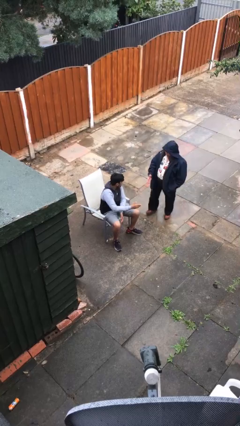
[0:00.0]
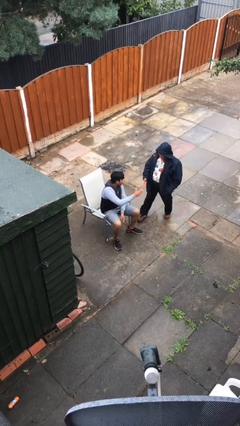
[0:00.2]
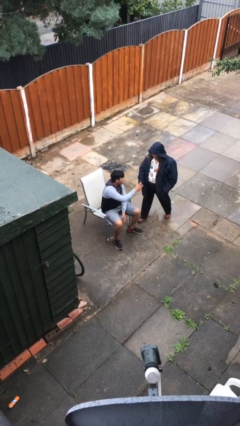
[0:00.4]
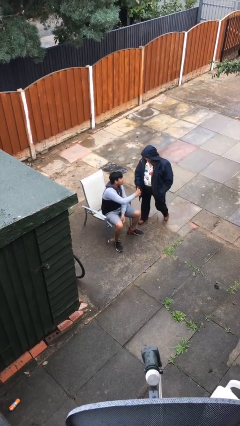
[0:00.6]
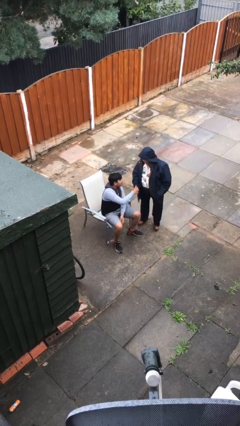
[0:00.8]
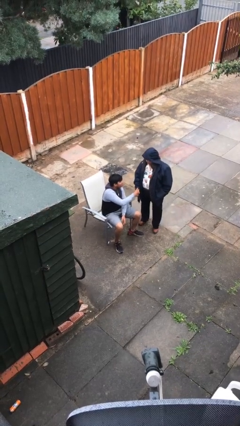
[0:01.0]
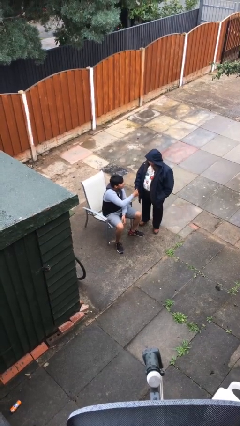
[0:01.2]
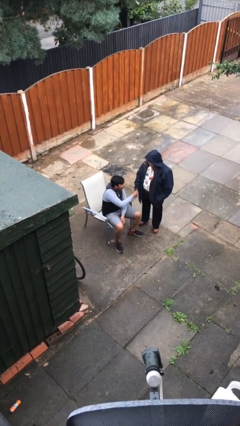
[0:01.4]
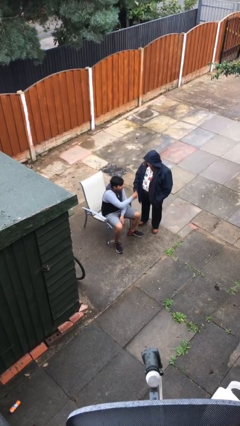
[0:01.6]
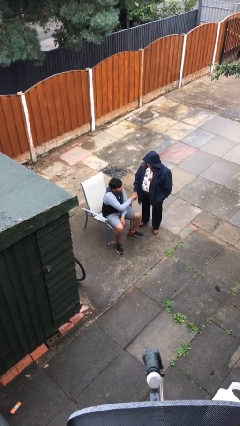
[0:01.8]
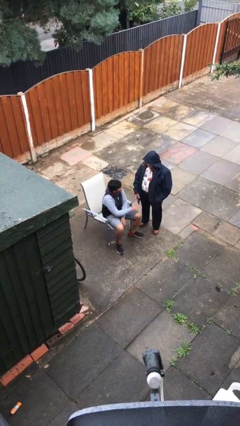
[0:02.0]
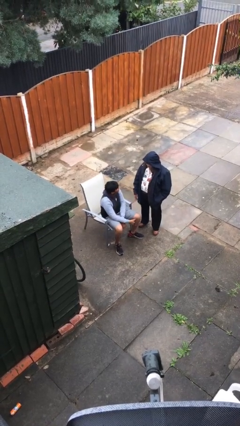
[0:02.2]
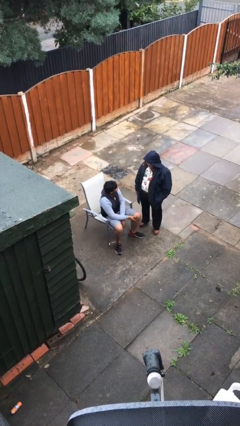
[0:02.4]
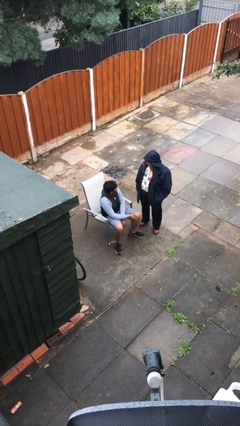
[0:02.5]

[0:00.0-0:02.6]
person shakes hand

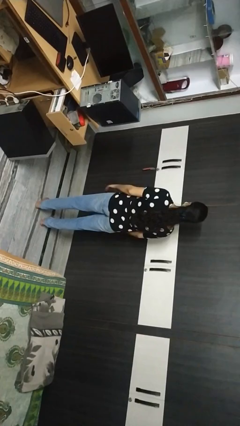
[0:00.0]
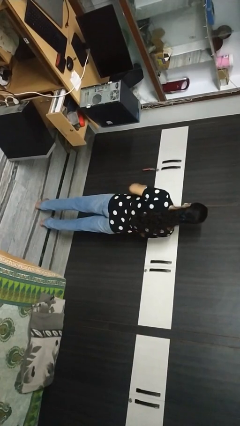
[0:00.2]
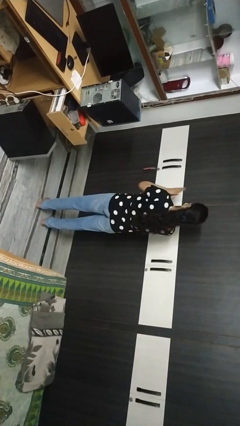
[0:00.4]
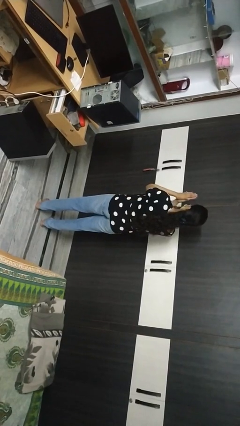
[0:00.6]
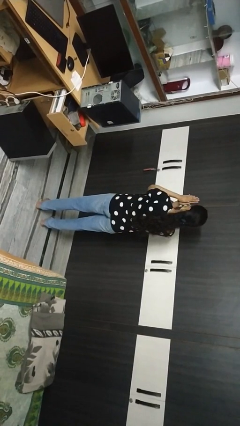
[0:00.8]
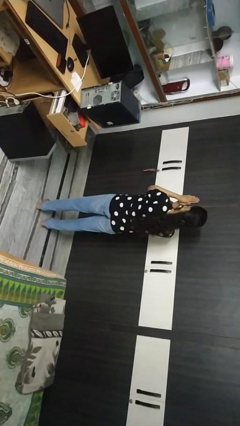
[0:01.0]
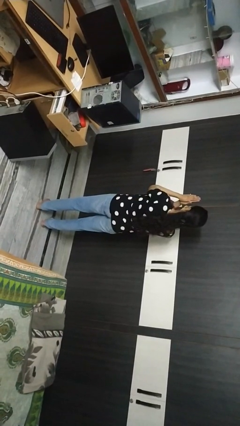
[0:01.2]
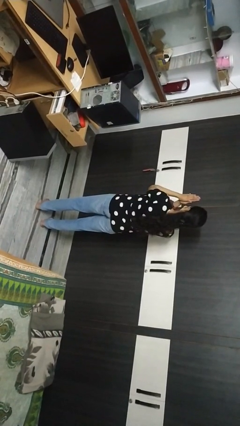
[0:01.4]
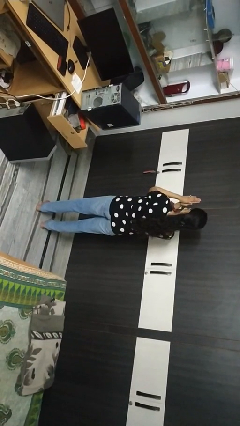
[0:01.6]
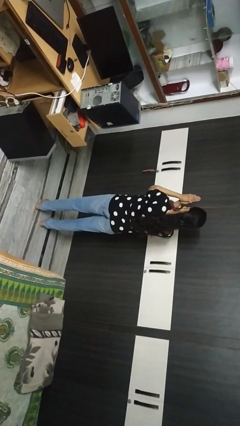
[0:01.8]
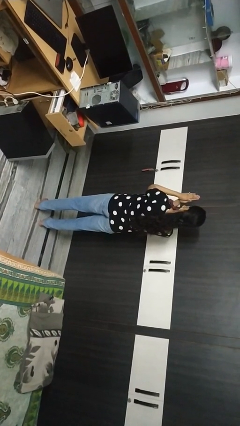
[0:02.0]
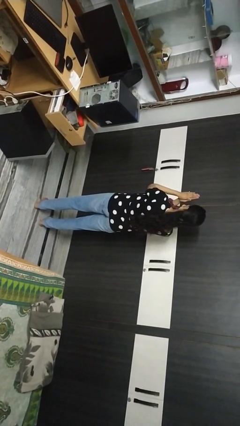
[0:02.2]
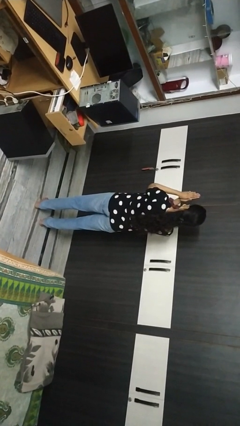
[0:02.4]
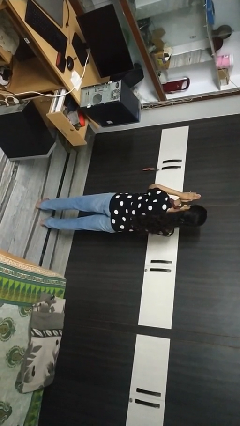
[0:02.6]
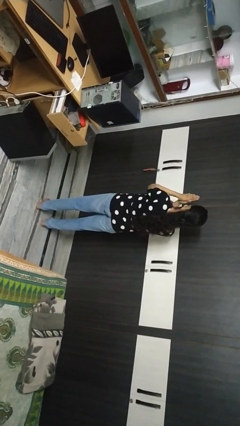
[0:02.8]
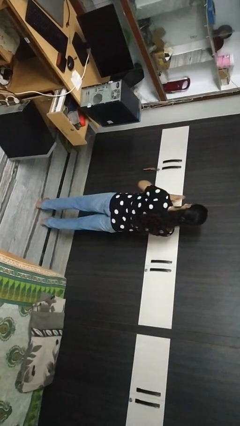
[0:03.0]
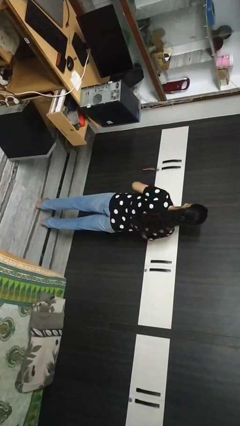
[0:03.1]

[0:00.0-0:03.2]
person prays

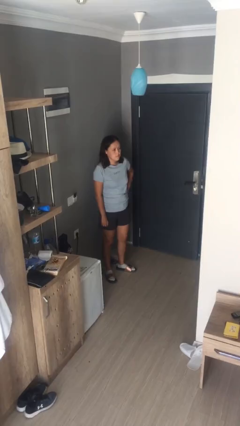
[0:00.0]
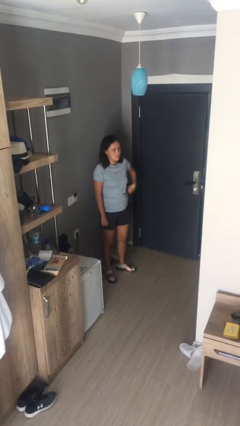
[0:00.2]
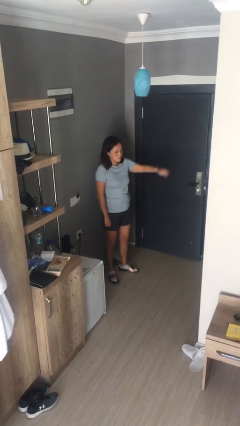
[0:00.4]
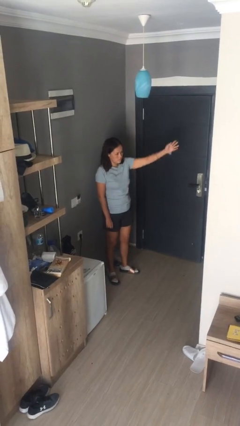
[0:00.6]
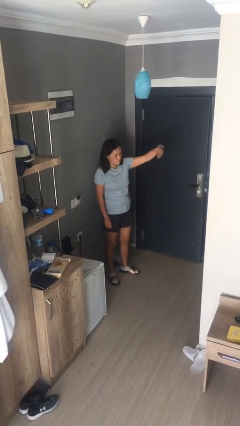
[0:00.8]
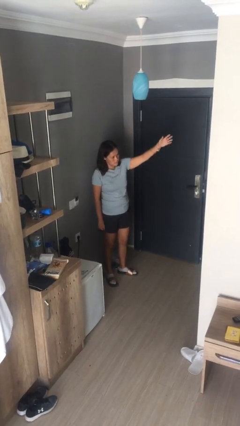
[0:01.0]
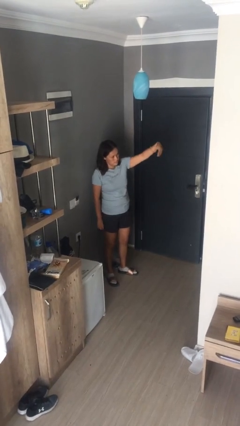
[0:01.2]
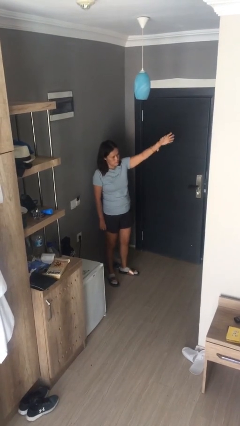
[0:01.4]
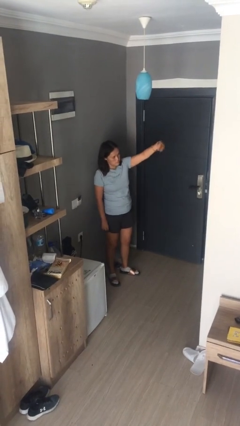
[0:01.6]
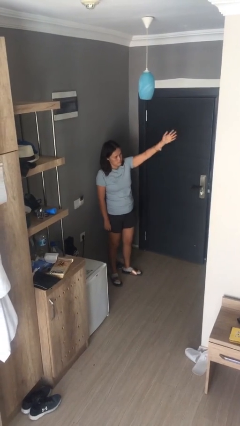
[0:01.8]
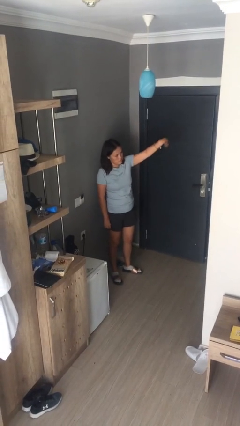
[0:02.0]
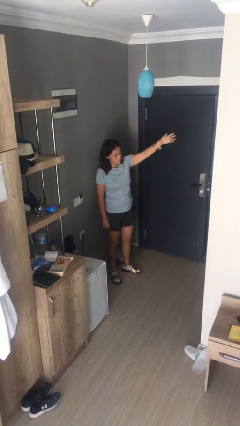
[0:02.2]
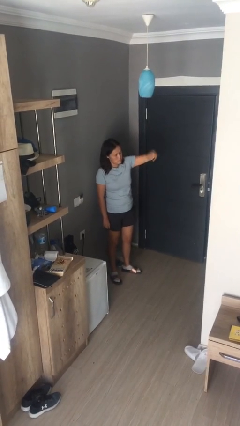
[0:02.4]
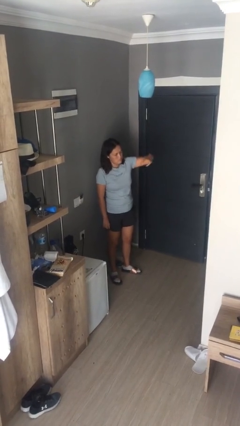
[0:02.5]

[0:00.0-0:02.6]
person gestures come here

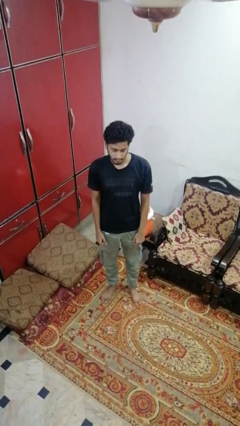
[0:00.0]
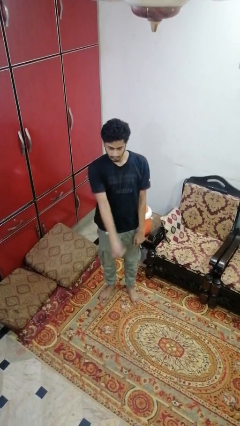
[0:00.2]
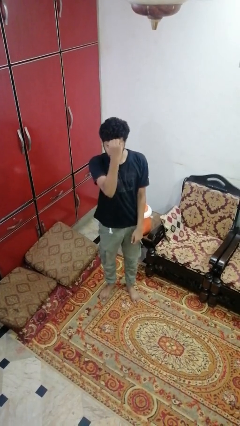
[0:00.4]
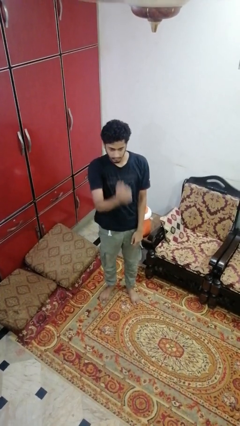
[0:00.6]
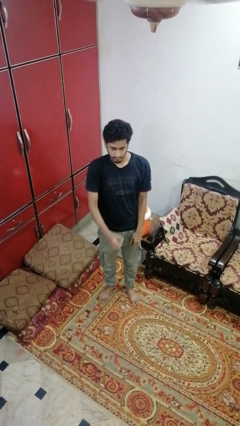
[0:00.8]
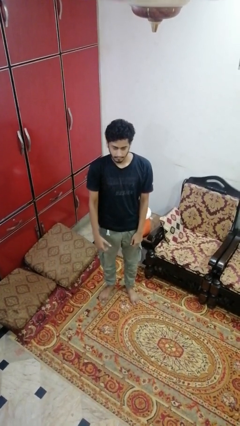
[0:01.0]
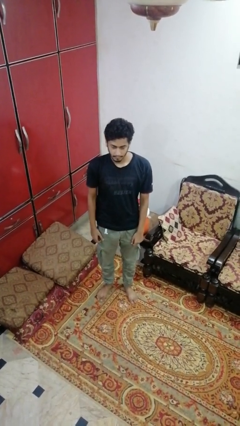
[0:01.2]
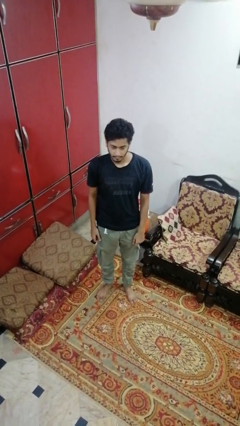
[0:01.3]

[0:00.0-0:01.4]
person punches

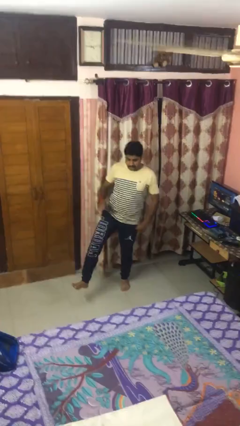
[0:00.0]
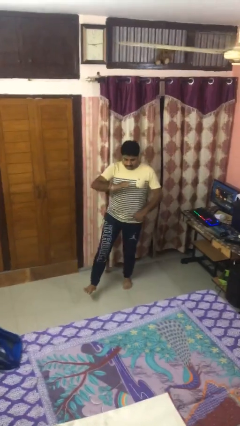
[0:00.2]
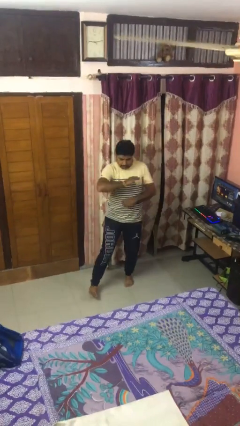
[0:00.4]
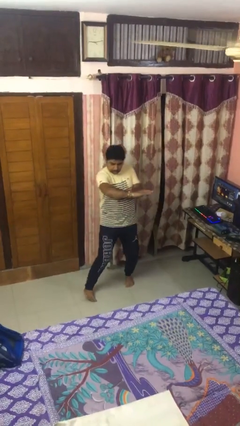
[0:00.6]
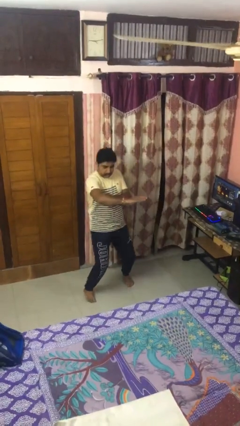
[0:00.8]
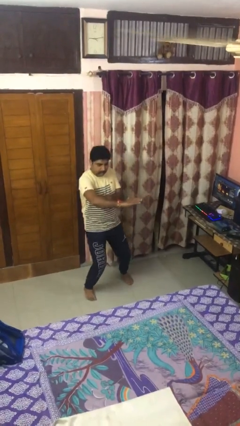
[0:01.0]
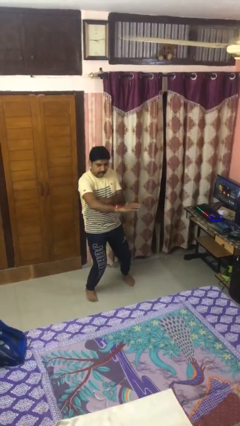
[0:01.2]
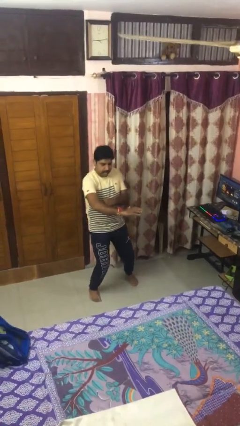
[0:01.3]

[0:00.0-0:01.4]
person karate chop

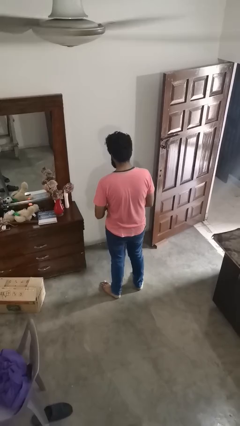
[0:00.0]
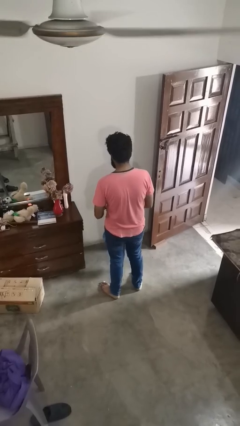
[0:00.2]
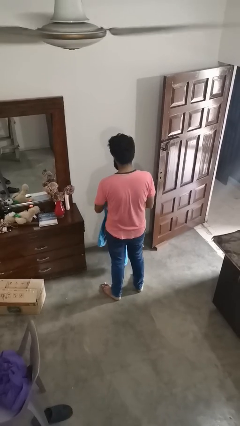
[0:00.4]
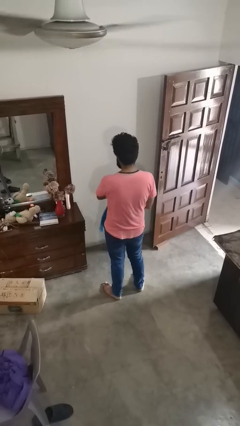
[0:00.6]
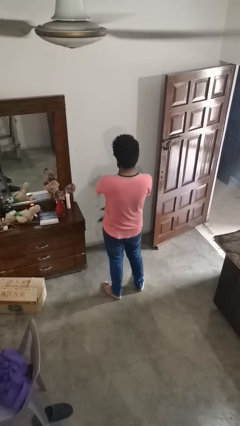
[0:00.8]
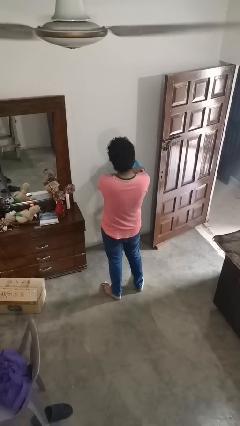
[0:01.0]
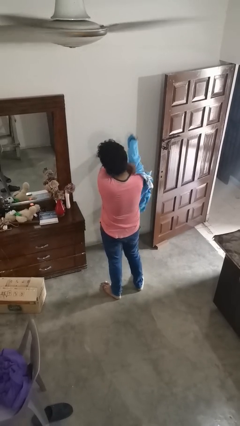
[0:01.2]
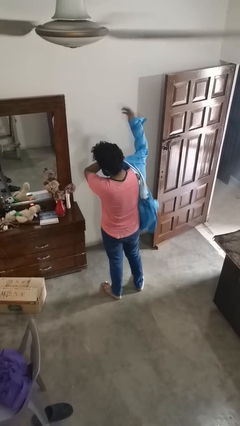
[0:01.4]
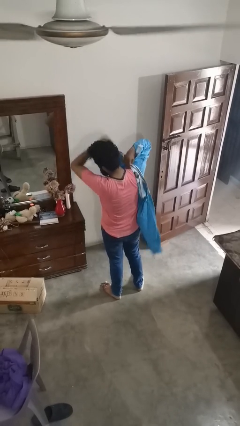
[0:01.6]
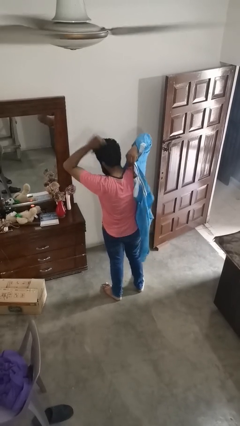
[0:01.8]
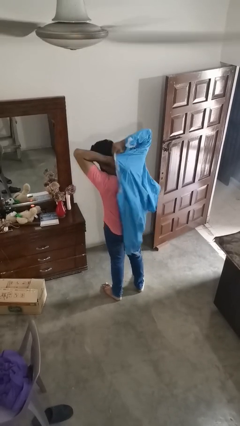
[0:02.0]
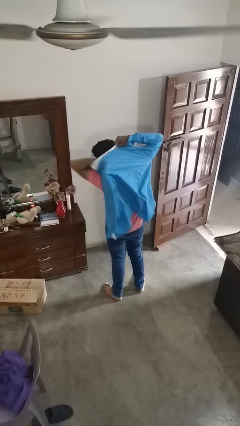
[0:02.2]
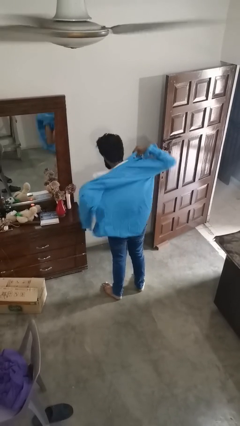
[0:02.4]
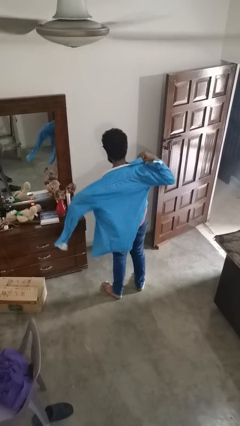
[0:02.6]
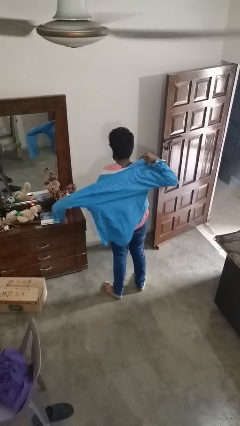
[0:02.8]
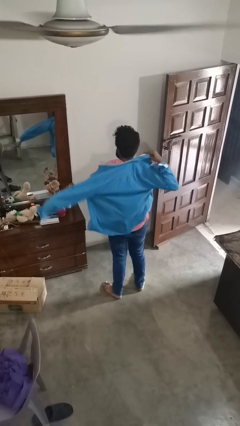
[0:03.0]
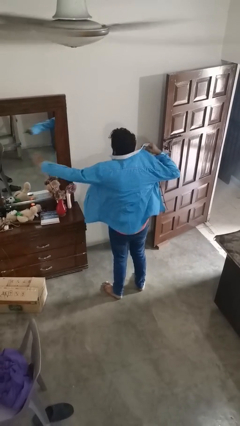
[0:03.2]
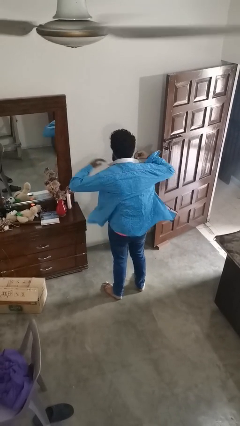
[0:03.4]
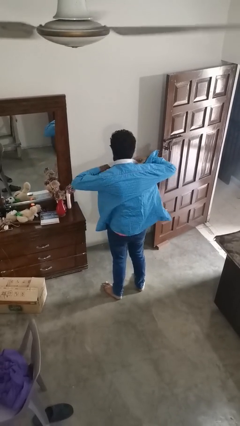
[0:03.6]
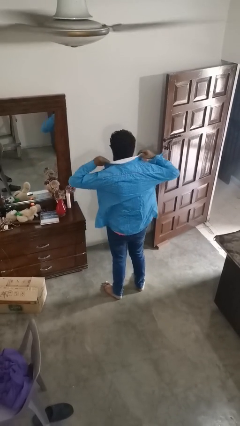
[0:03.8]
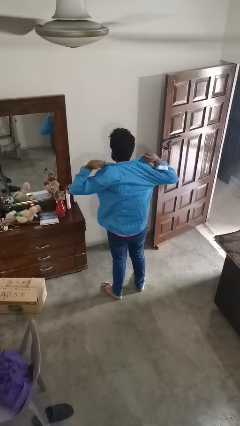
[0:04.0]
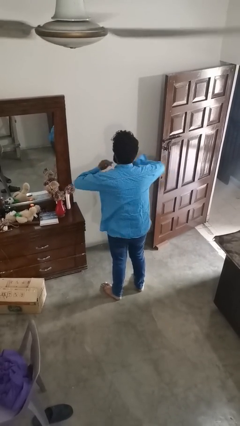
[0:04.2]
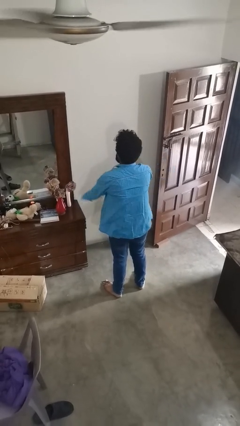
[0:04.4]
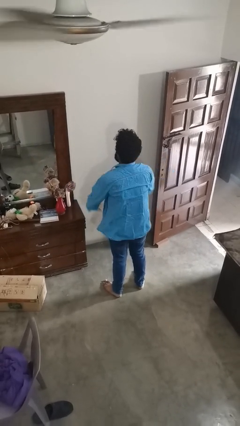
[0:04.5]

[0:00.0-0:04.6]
person puts on shirt

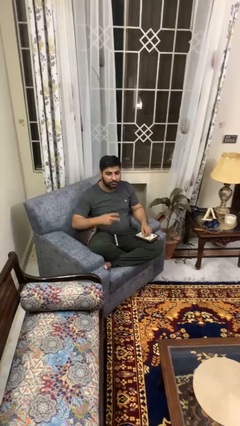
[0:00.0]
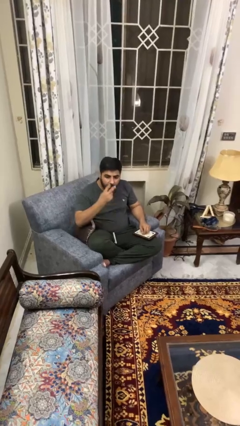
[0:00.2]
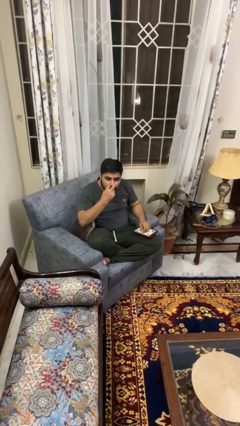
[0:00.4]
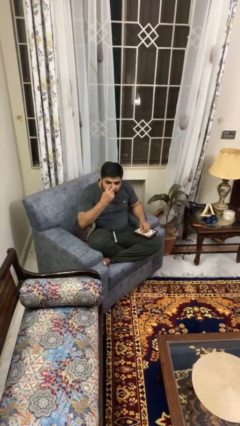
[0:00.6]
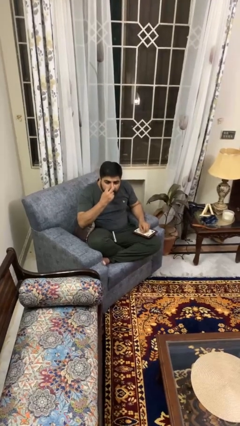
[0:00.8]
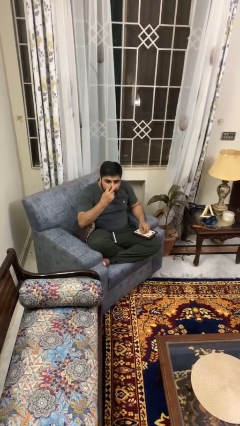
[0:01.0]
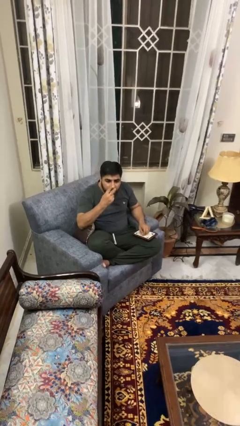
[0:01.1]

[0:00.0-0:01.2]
person gestures watch closely
